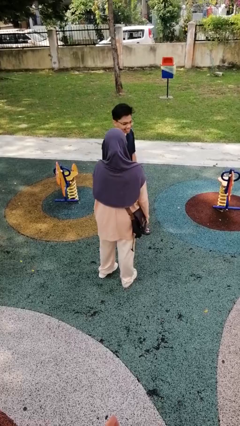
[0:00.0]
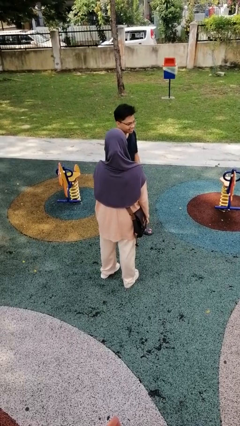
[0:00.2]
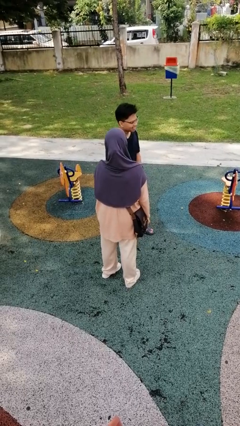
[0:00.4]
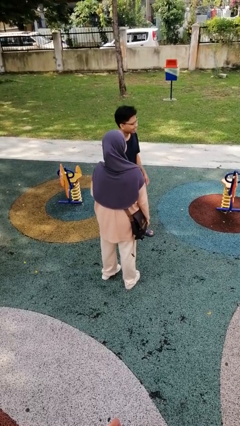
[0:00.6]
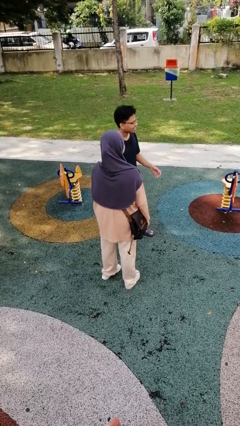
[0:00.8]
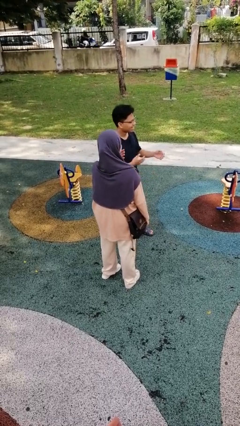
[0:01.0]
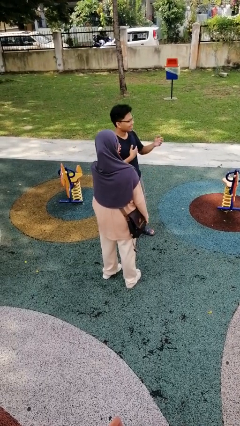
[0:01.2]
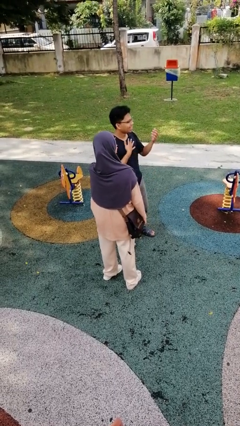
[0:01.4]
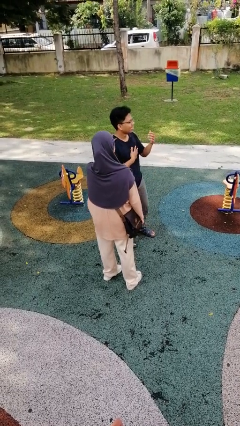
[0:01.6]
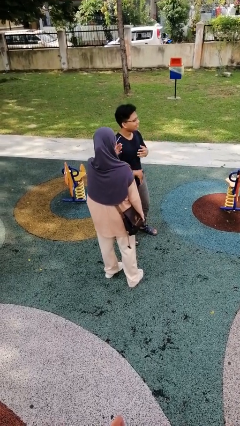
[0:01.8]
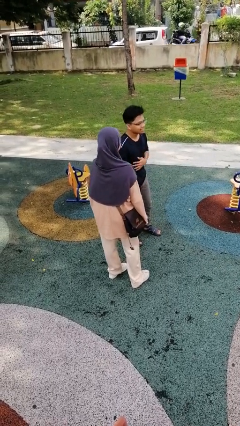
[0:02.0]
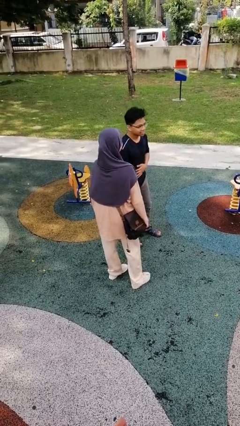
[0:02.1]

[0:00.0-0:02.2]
person laughs with person

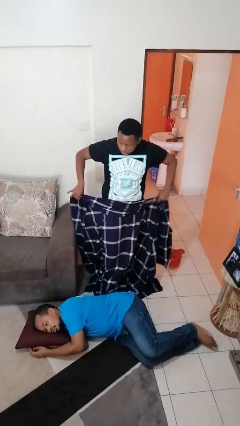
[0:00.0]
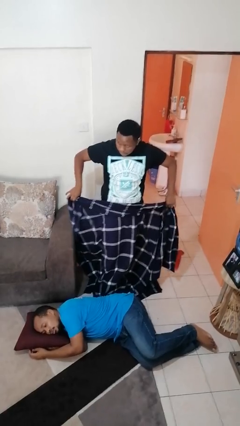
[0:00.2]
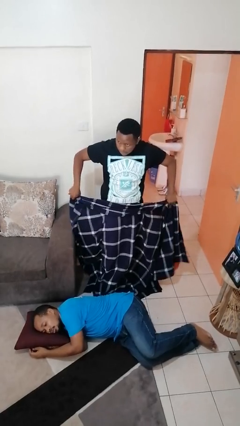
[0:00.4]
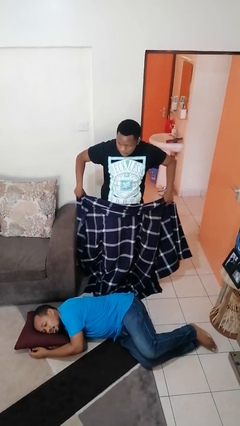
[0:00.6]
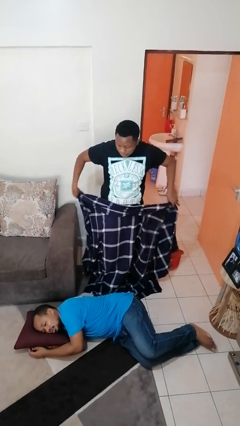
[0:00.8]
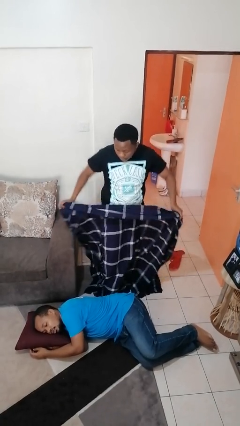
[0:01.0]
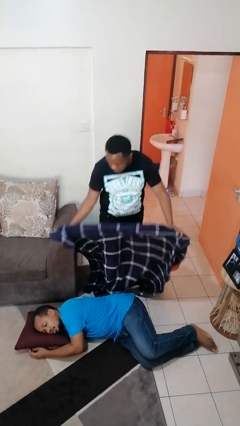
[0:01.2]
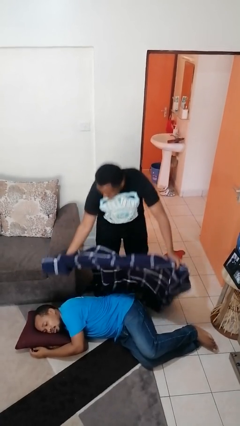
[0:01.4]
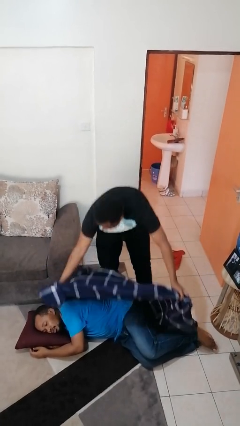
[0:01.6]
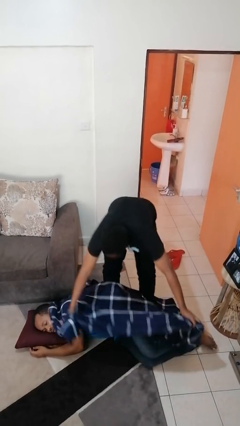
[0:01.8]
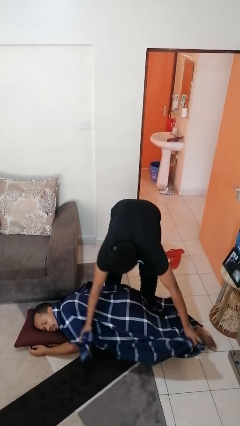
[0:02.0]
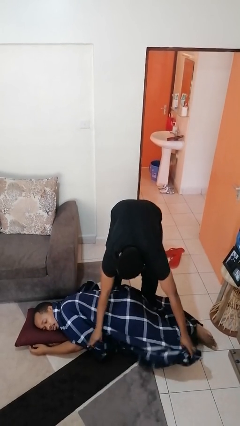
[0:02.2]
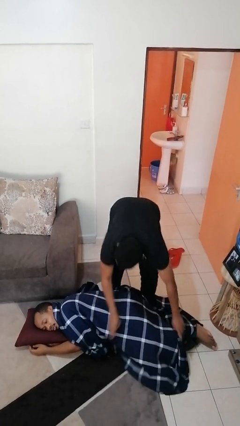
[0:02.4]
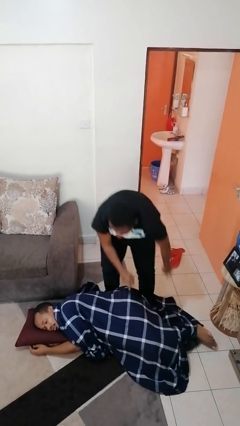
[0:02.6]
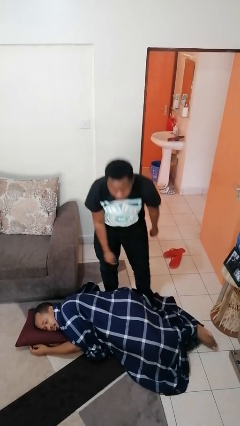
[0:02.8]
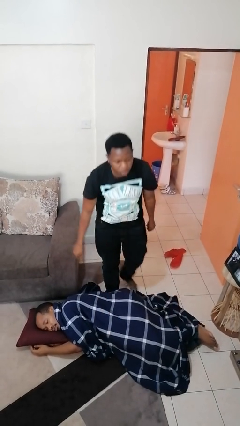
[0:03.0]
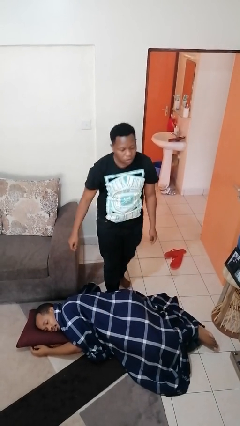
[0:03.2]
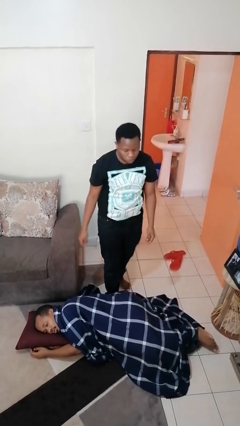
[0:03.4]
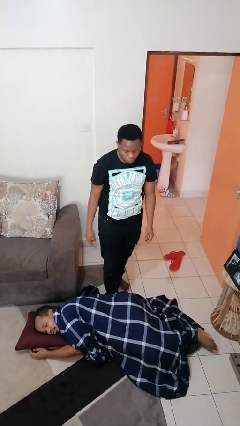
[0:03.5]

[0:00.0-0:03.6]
person covers friend with blanket

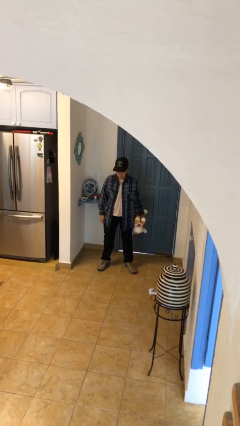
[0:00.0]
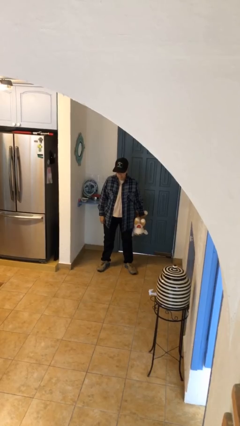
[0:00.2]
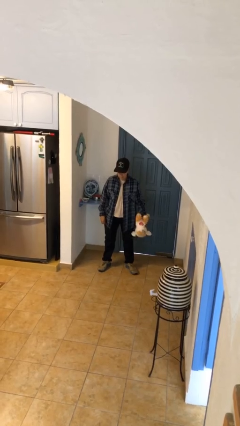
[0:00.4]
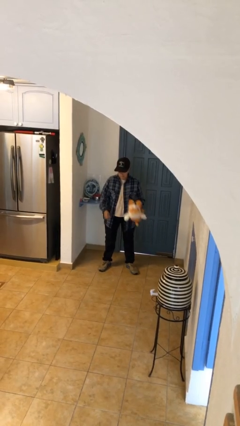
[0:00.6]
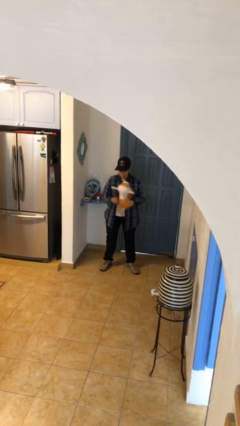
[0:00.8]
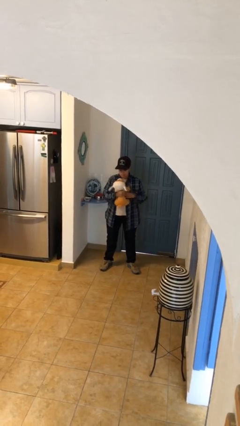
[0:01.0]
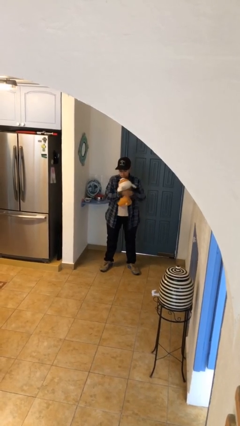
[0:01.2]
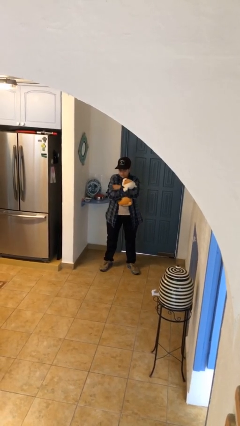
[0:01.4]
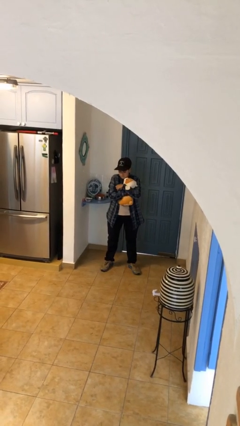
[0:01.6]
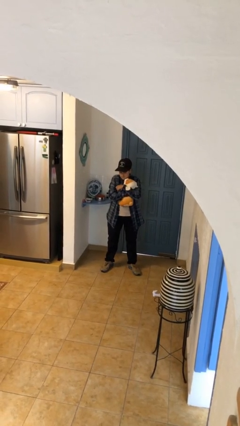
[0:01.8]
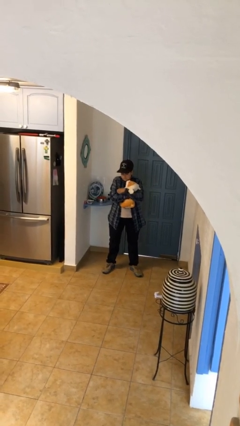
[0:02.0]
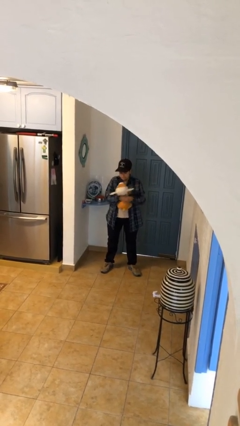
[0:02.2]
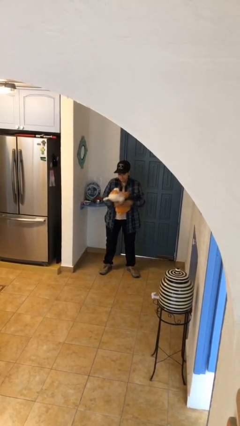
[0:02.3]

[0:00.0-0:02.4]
person hugs stuffed animal

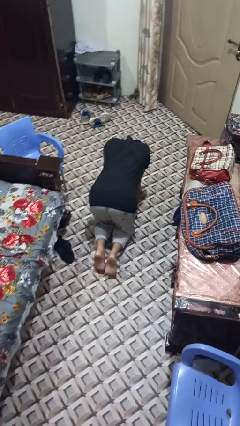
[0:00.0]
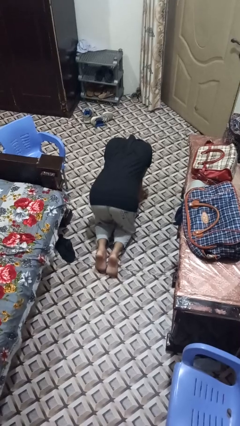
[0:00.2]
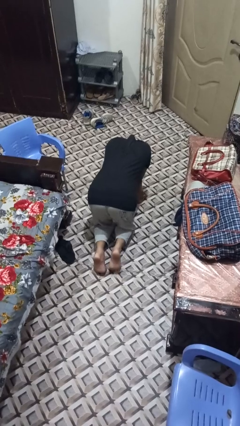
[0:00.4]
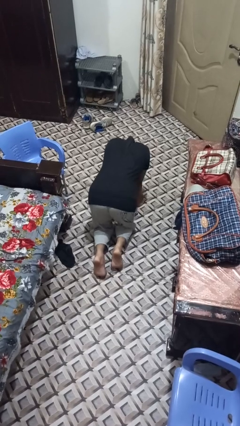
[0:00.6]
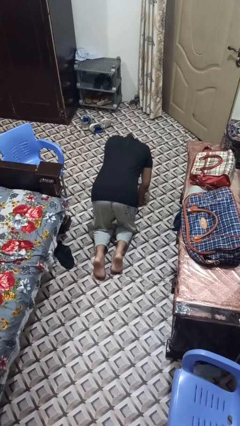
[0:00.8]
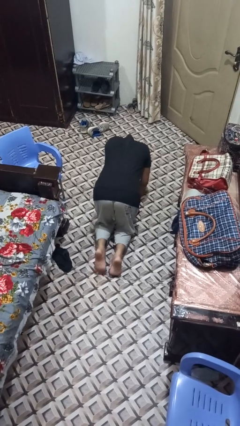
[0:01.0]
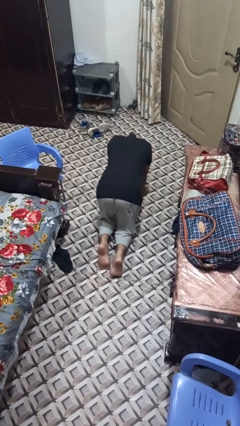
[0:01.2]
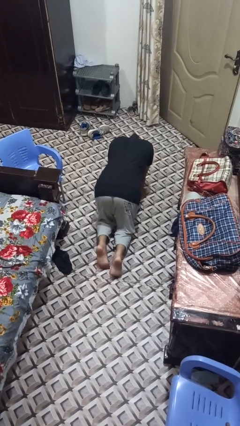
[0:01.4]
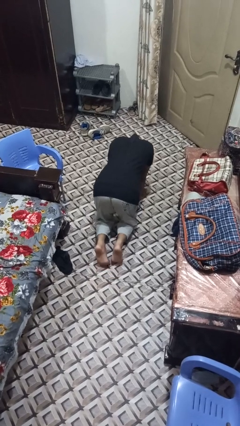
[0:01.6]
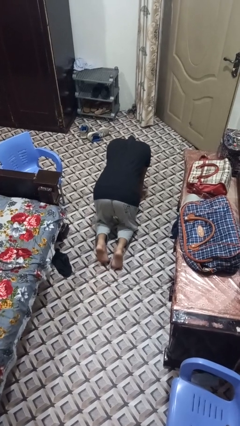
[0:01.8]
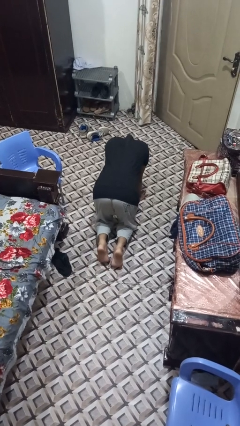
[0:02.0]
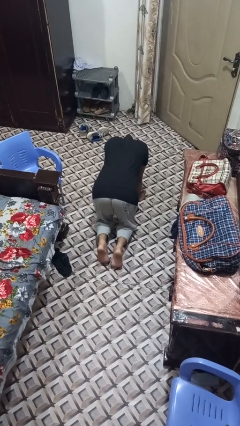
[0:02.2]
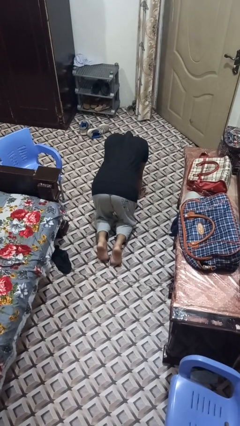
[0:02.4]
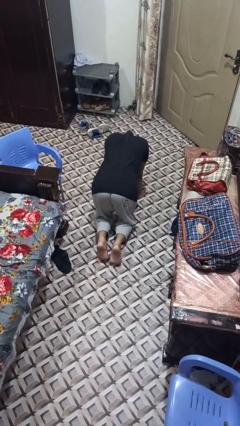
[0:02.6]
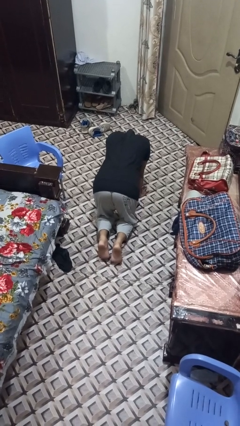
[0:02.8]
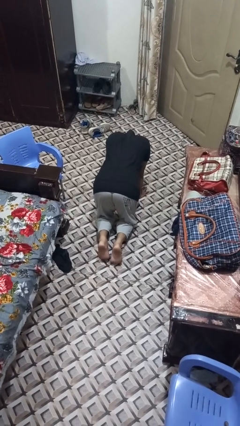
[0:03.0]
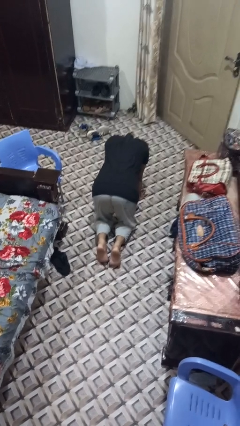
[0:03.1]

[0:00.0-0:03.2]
person crawls

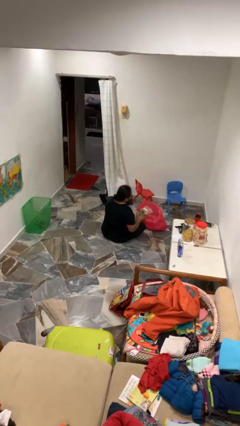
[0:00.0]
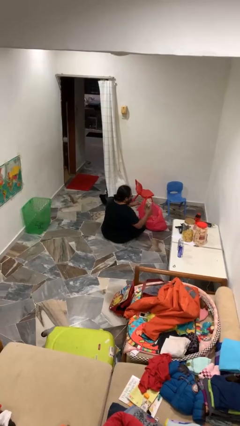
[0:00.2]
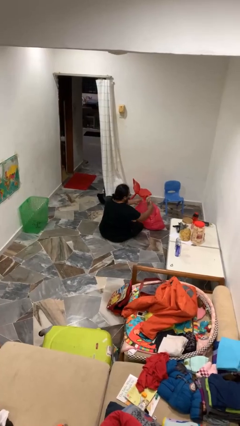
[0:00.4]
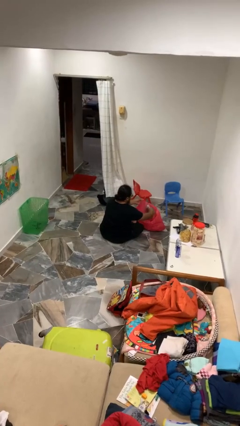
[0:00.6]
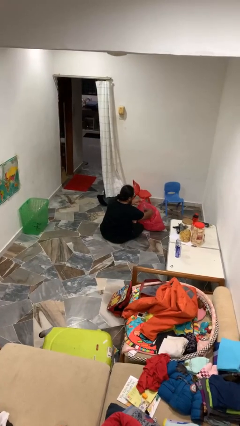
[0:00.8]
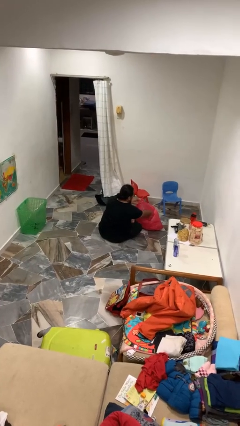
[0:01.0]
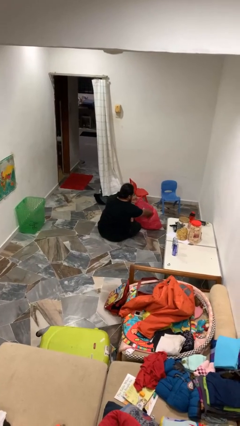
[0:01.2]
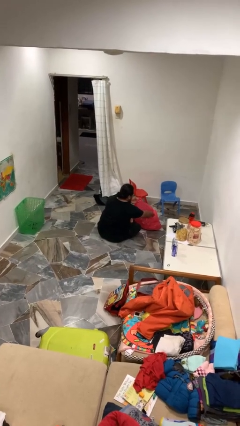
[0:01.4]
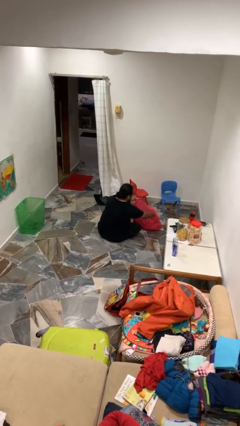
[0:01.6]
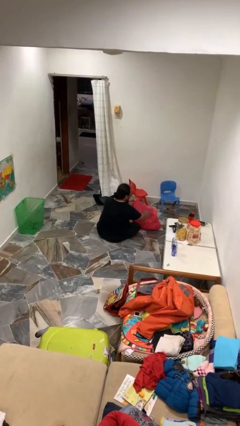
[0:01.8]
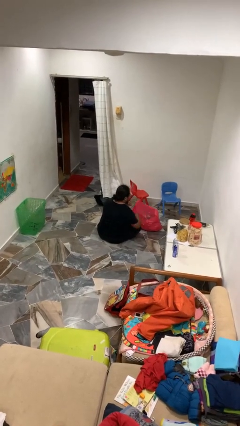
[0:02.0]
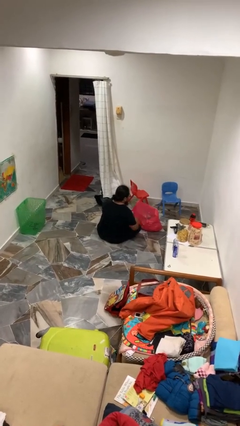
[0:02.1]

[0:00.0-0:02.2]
person puts object into bag

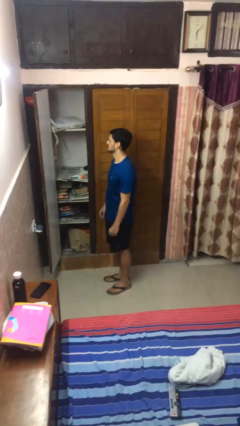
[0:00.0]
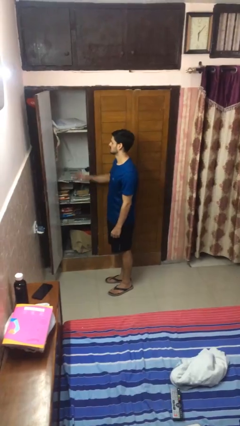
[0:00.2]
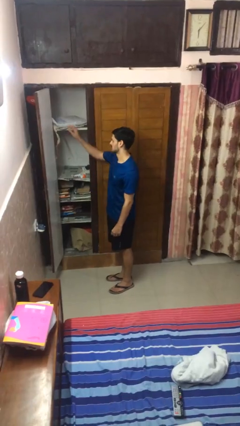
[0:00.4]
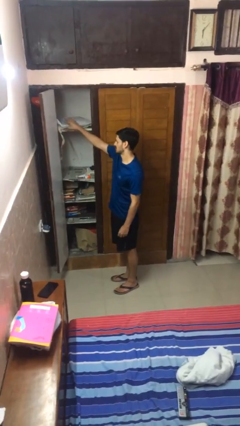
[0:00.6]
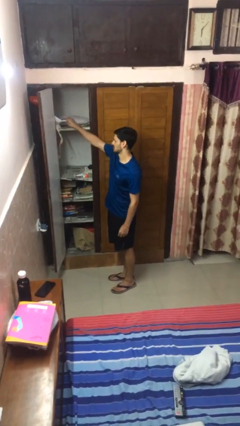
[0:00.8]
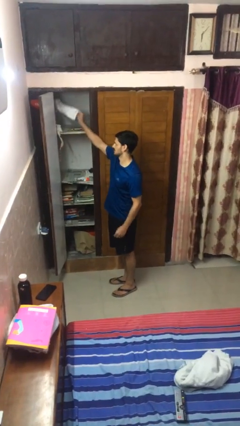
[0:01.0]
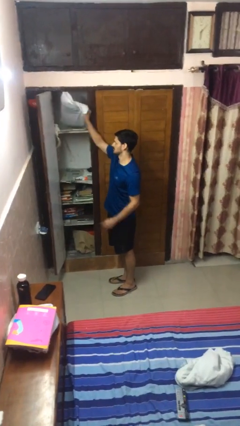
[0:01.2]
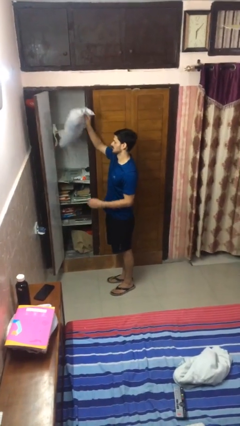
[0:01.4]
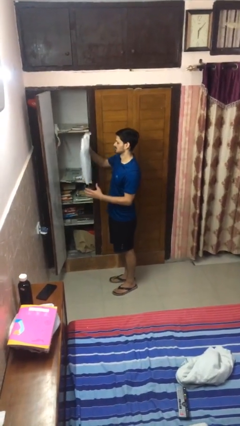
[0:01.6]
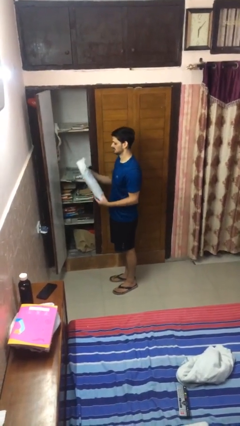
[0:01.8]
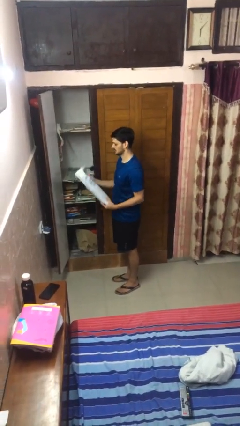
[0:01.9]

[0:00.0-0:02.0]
person picks up object from shelf

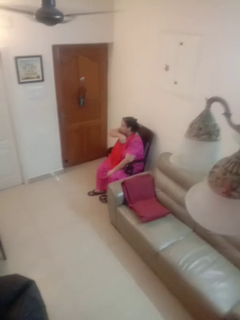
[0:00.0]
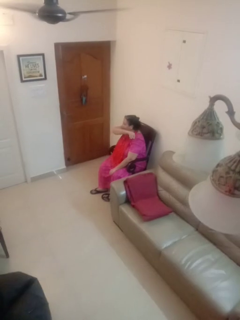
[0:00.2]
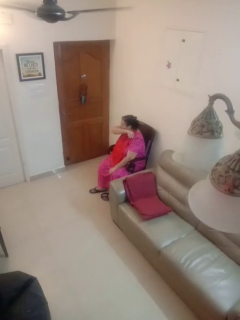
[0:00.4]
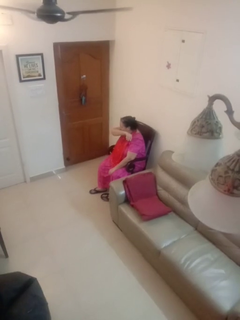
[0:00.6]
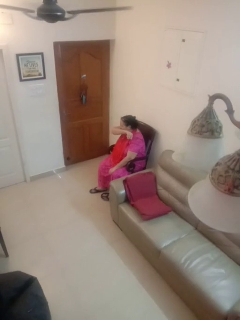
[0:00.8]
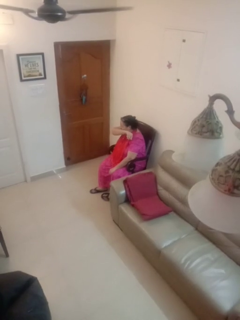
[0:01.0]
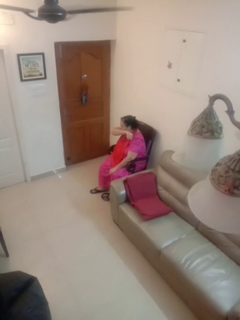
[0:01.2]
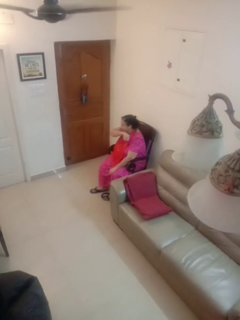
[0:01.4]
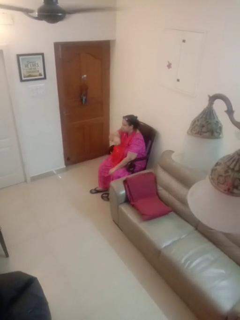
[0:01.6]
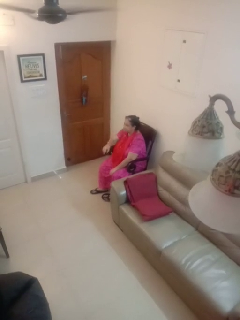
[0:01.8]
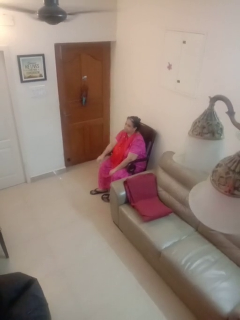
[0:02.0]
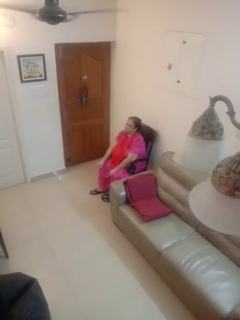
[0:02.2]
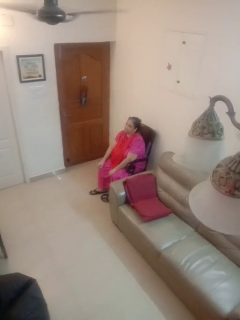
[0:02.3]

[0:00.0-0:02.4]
person sneezes into arm
